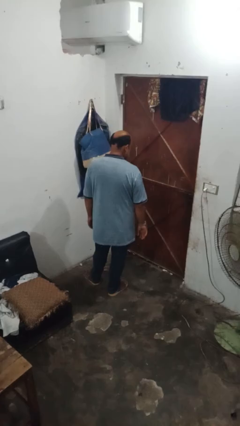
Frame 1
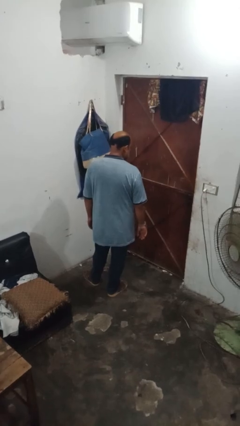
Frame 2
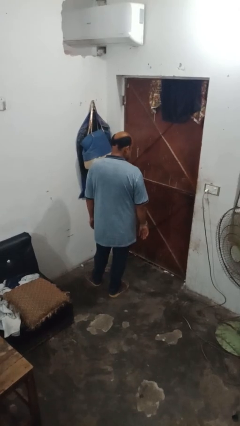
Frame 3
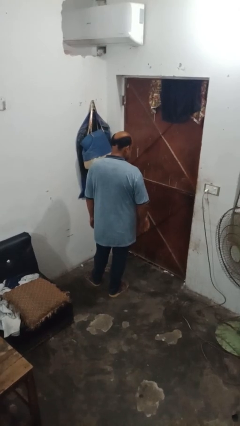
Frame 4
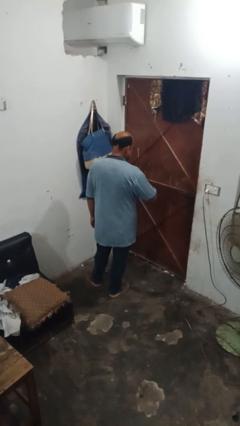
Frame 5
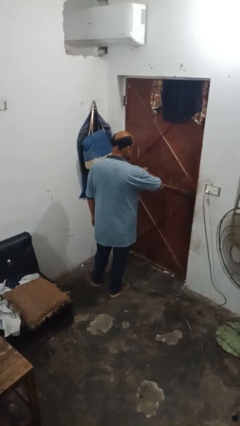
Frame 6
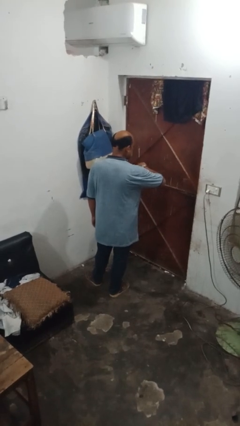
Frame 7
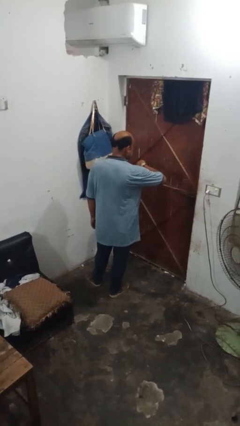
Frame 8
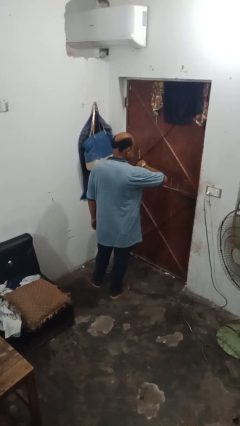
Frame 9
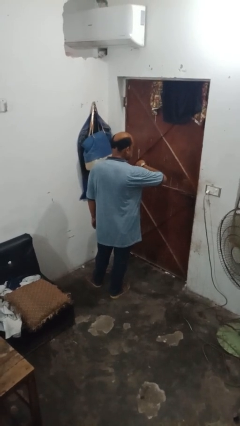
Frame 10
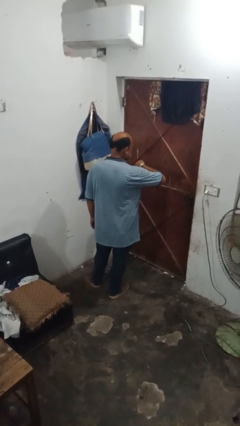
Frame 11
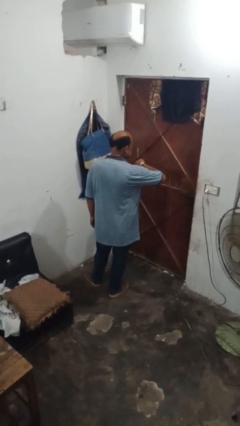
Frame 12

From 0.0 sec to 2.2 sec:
person looks at wristwatch

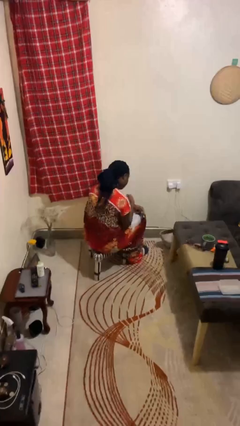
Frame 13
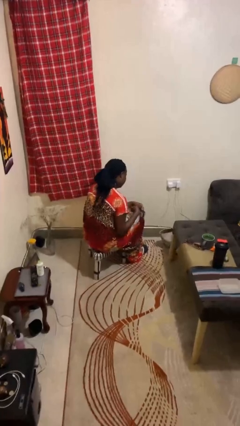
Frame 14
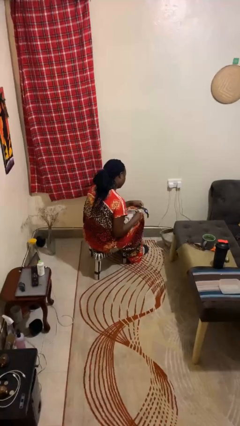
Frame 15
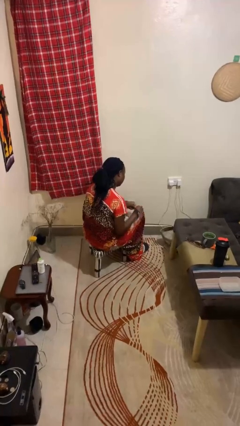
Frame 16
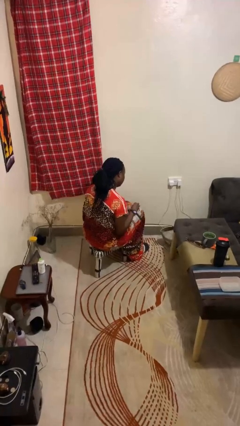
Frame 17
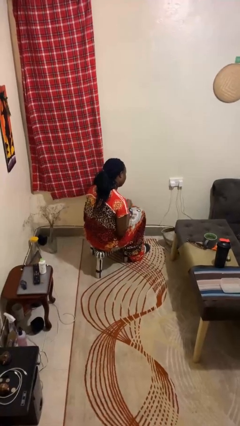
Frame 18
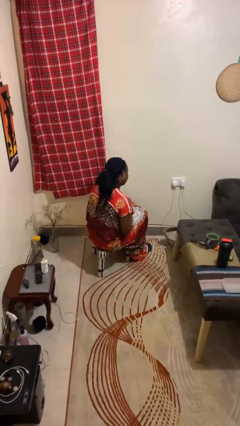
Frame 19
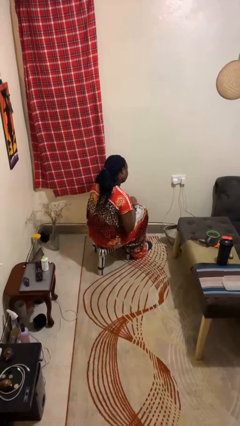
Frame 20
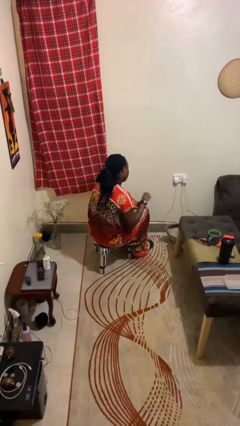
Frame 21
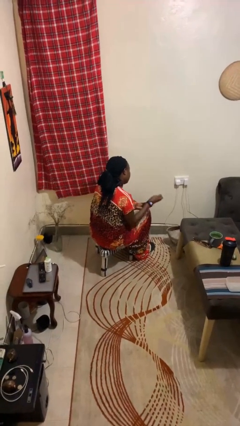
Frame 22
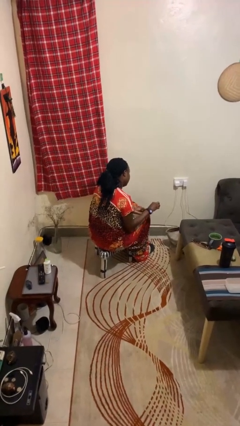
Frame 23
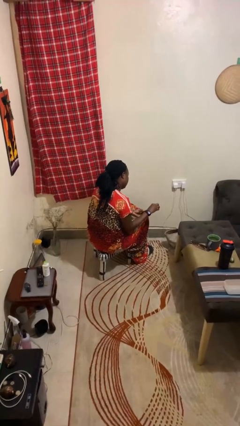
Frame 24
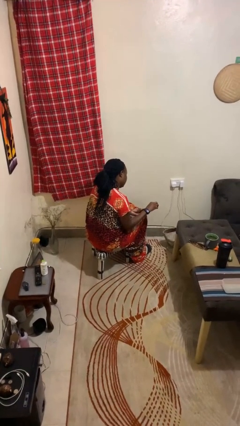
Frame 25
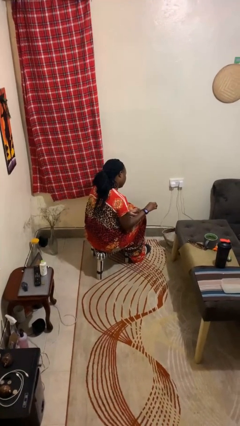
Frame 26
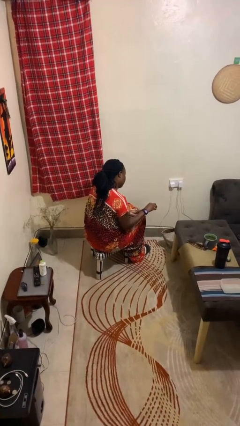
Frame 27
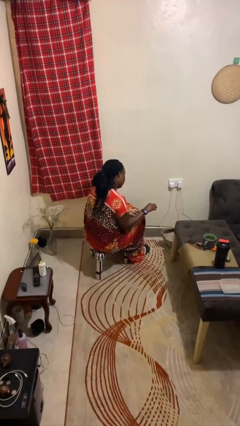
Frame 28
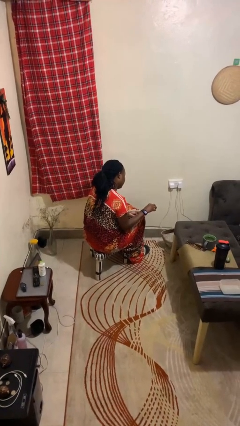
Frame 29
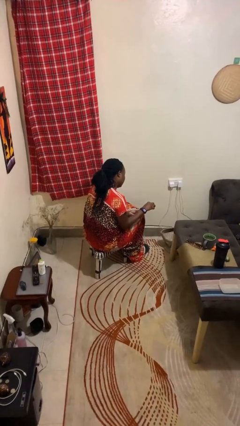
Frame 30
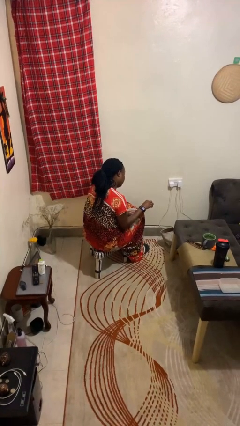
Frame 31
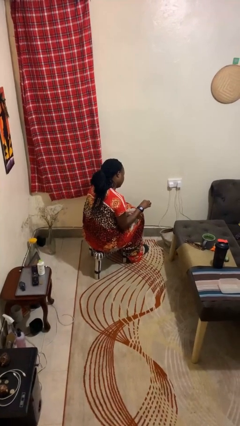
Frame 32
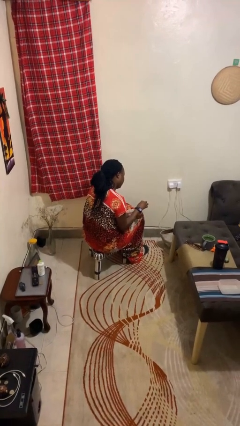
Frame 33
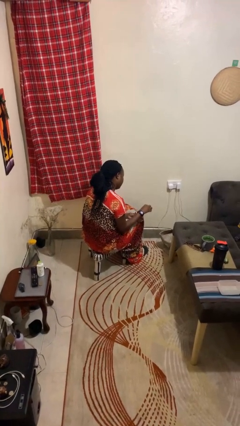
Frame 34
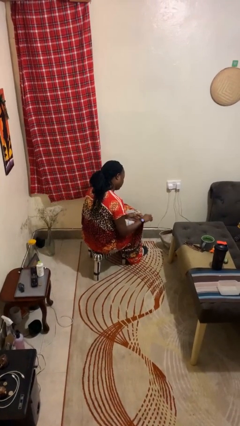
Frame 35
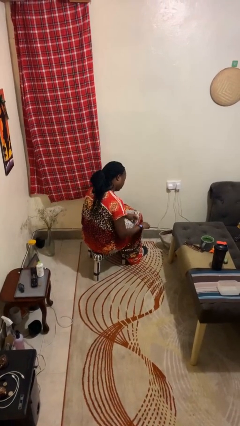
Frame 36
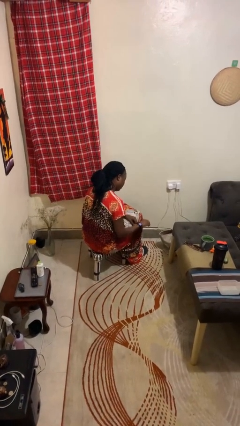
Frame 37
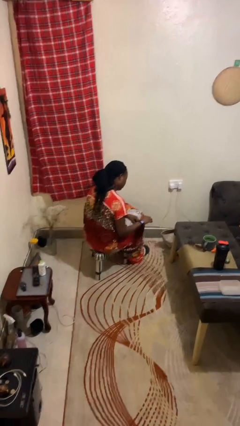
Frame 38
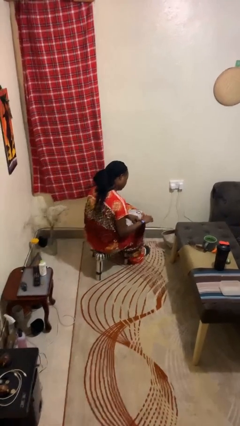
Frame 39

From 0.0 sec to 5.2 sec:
person puts on wristwatch

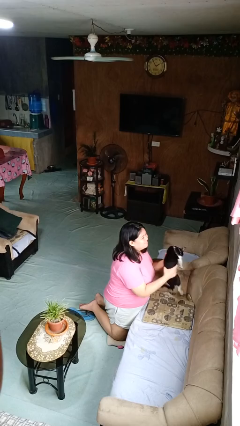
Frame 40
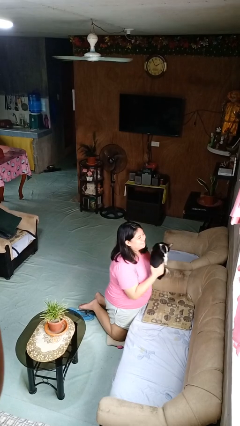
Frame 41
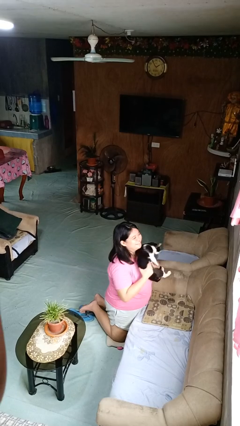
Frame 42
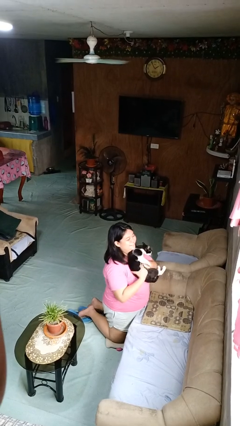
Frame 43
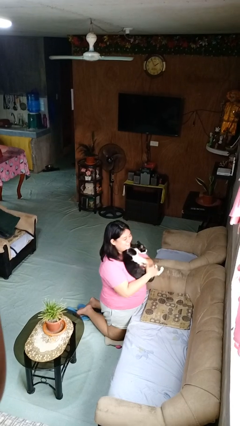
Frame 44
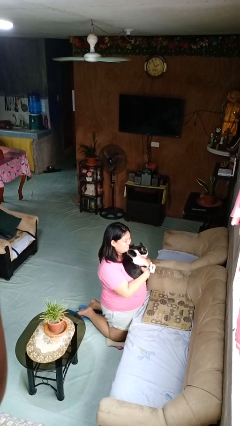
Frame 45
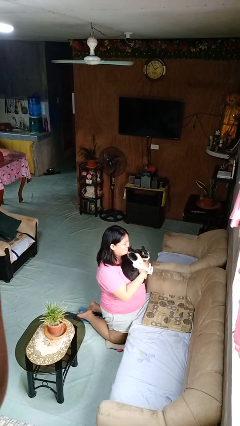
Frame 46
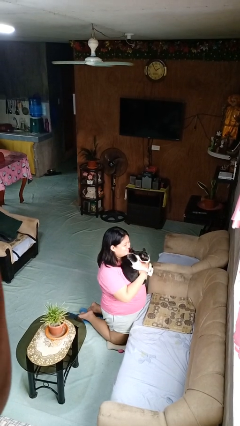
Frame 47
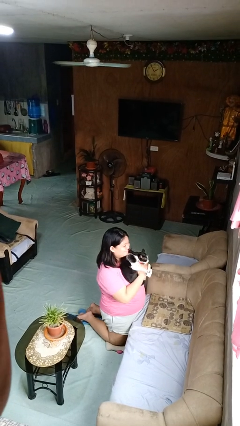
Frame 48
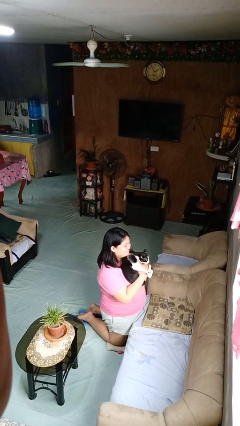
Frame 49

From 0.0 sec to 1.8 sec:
person hugs cat

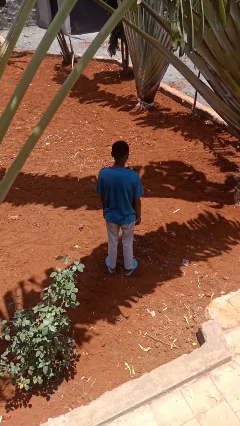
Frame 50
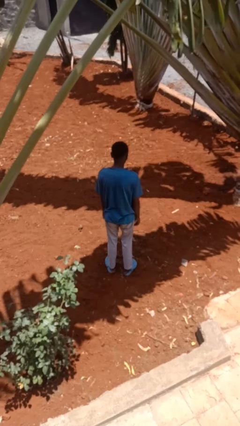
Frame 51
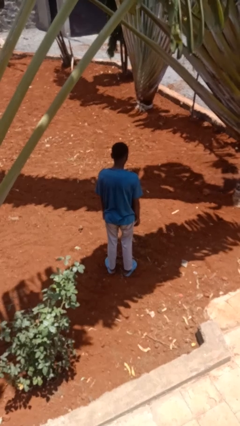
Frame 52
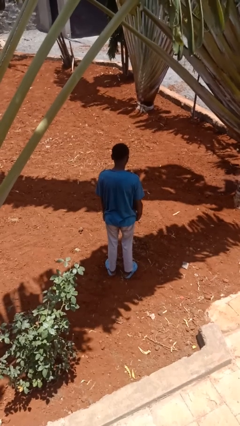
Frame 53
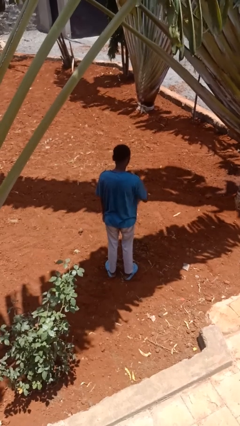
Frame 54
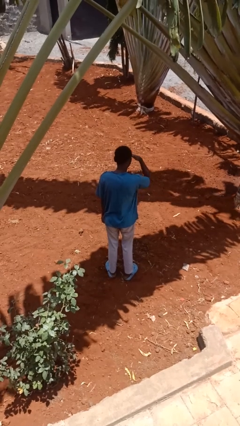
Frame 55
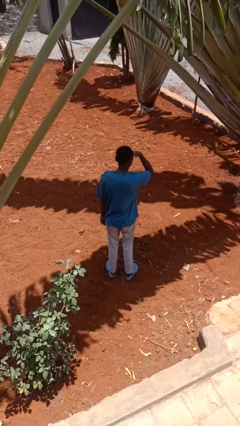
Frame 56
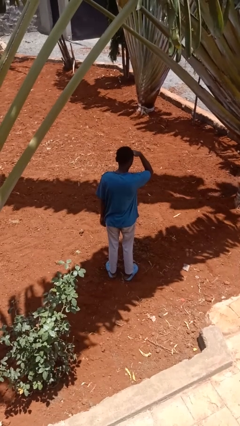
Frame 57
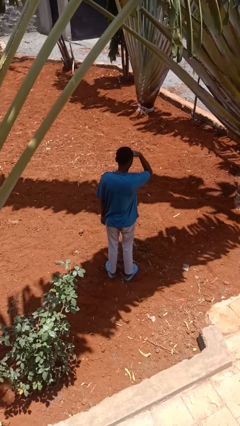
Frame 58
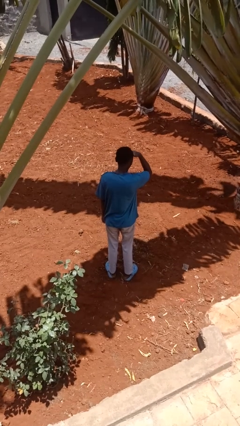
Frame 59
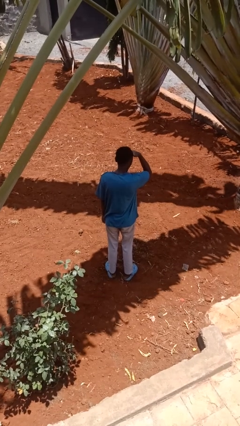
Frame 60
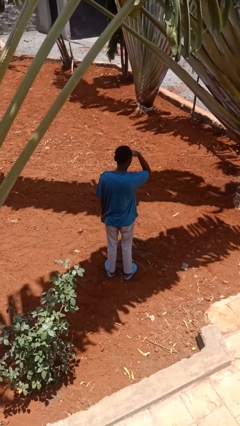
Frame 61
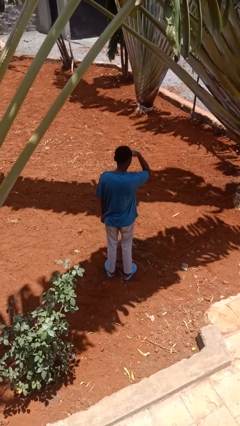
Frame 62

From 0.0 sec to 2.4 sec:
person shades eyes

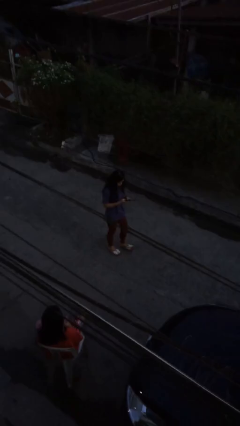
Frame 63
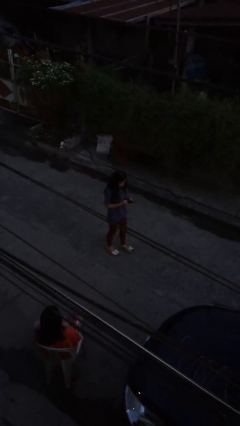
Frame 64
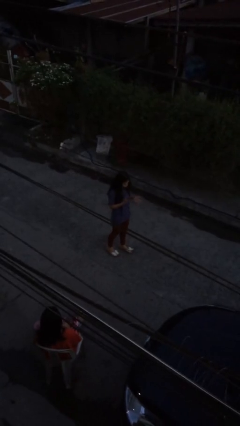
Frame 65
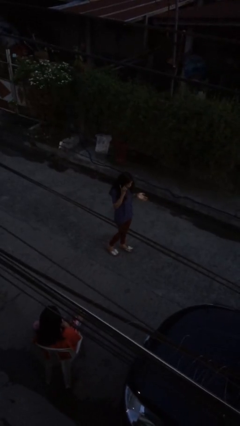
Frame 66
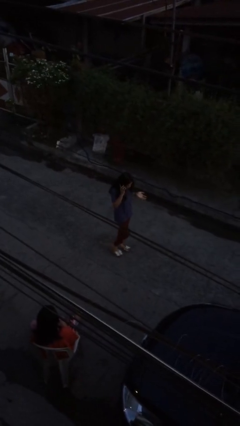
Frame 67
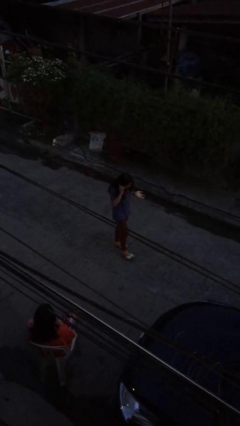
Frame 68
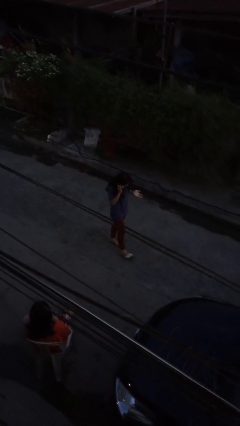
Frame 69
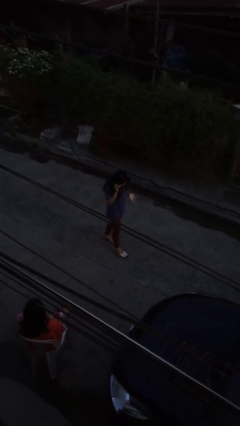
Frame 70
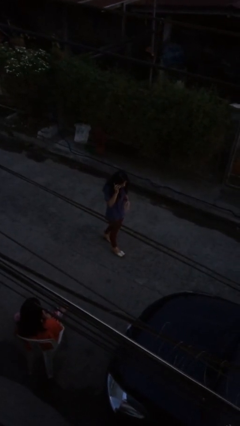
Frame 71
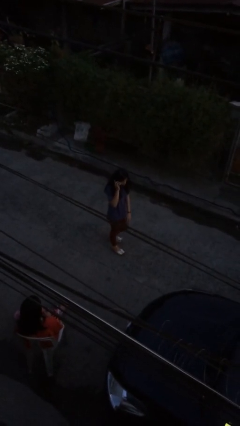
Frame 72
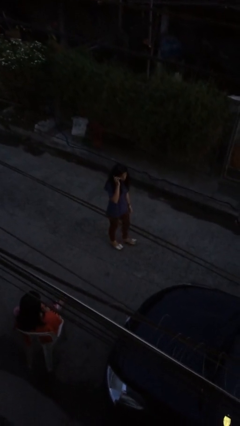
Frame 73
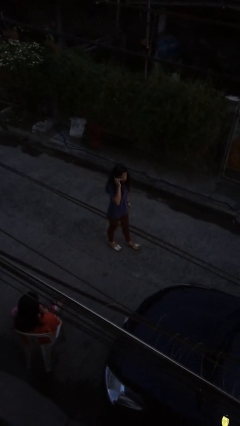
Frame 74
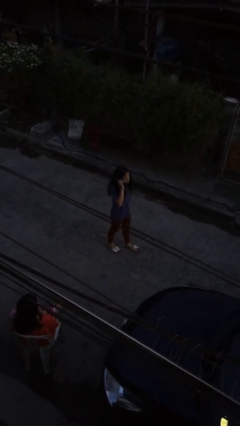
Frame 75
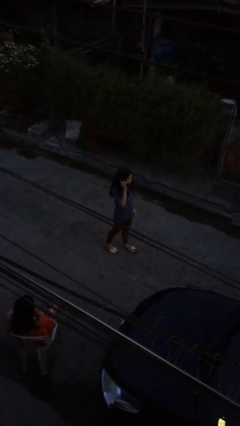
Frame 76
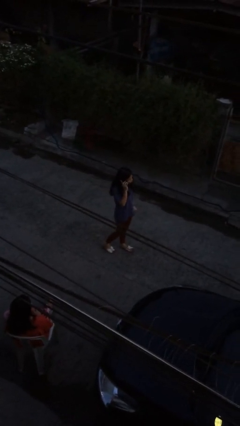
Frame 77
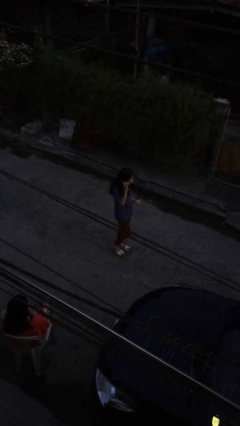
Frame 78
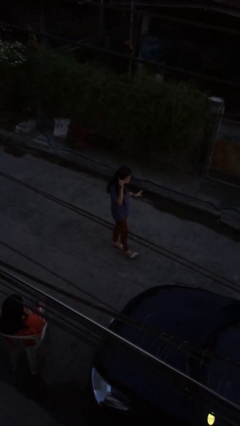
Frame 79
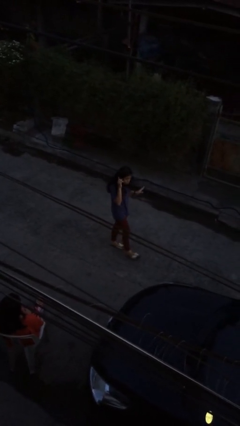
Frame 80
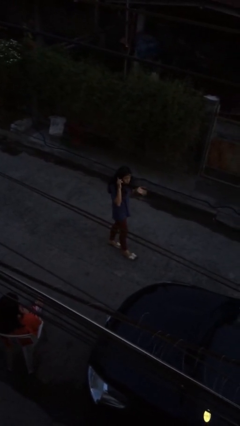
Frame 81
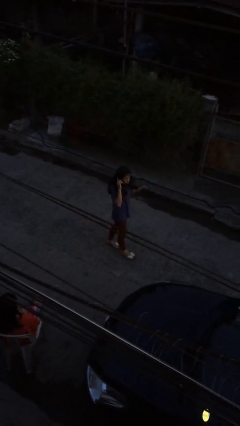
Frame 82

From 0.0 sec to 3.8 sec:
person talks on phone

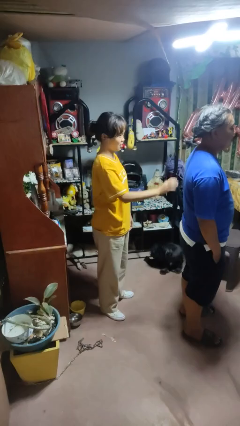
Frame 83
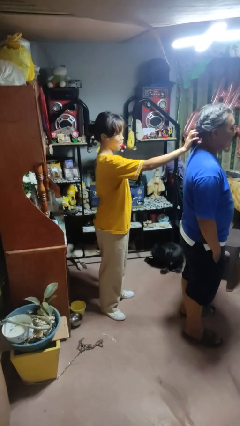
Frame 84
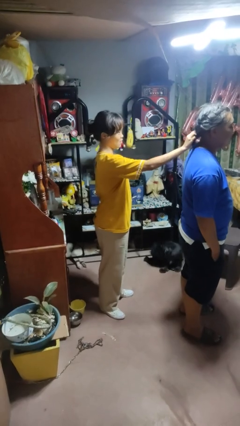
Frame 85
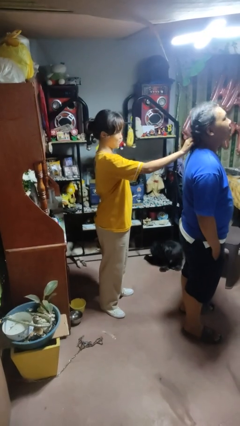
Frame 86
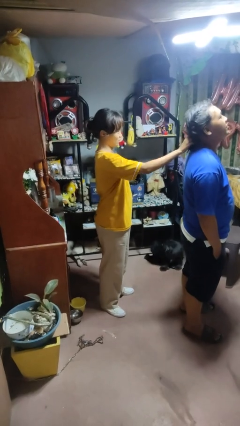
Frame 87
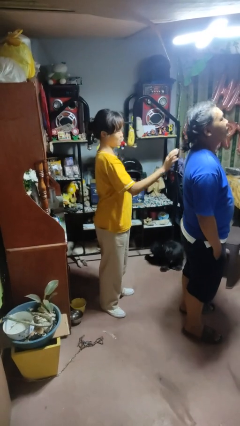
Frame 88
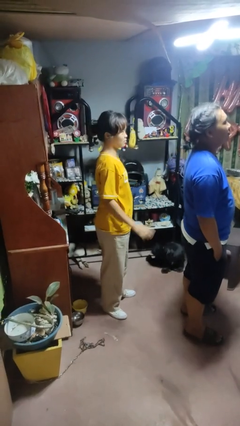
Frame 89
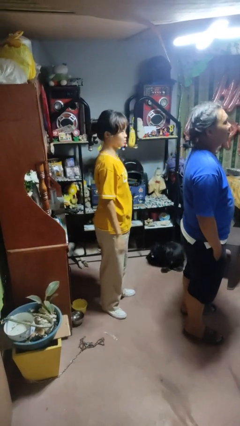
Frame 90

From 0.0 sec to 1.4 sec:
person grabs person by hair

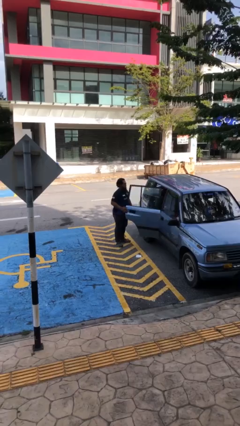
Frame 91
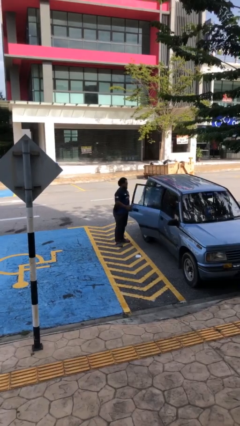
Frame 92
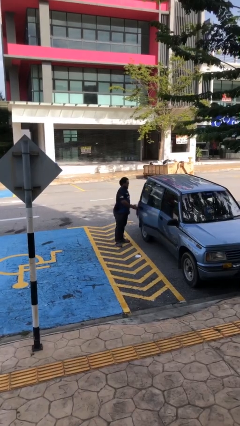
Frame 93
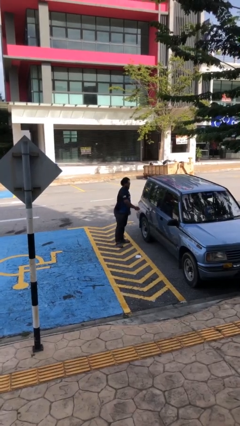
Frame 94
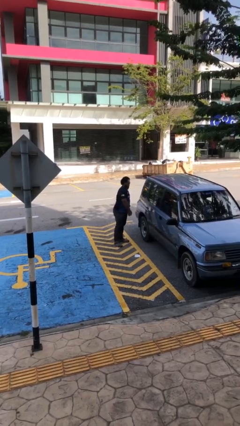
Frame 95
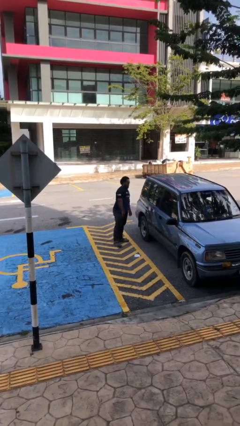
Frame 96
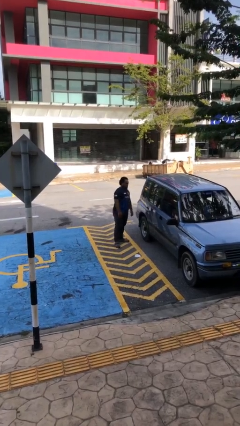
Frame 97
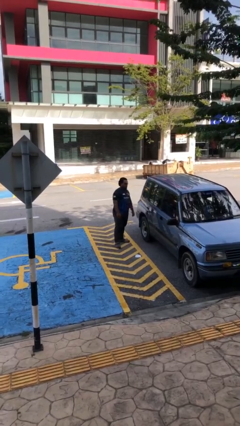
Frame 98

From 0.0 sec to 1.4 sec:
person closes car door
